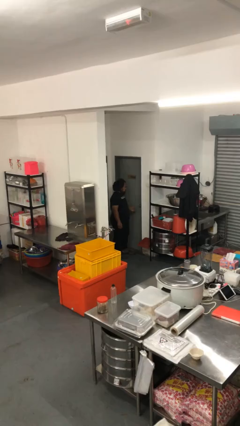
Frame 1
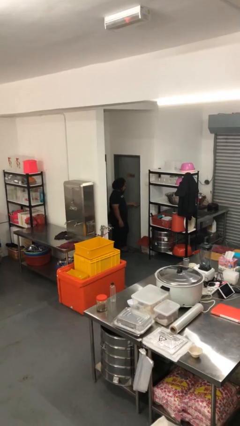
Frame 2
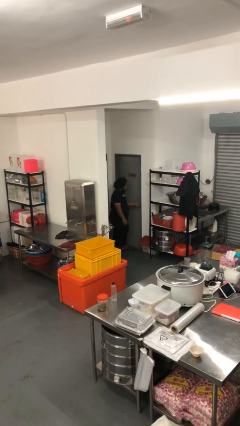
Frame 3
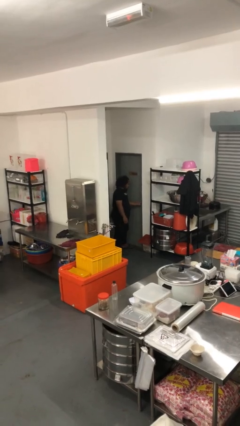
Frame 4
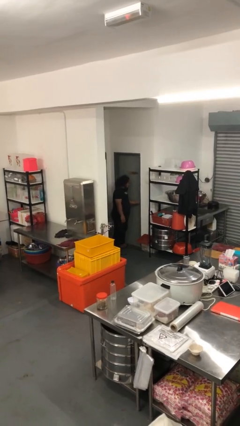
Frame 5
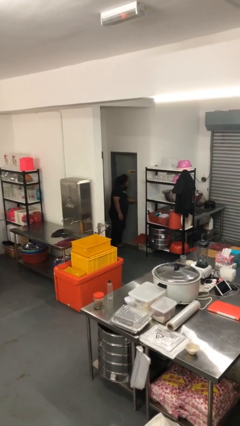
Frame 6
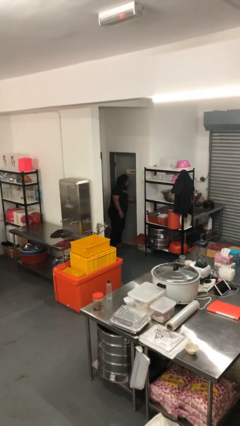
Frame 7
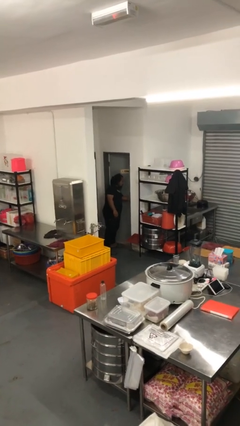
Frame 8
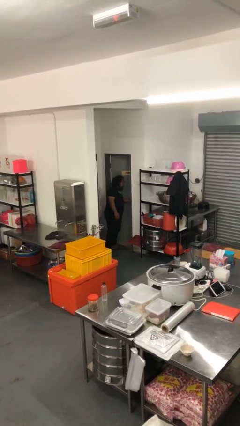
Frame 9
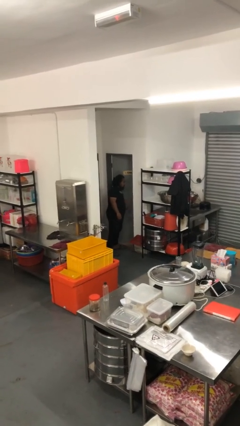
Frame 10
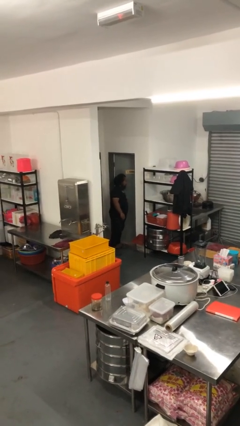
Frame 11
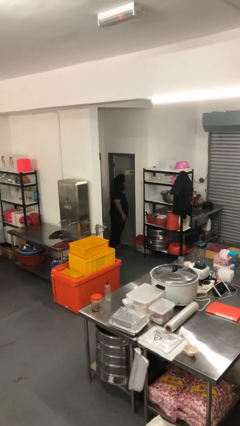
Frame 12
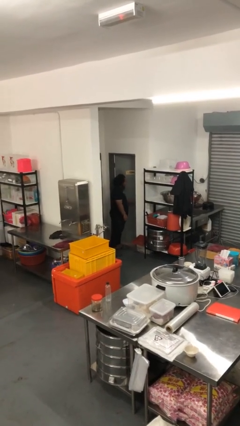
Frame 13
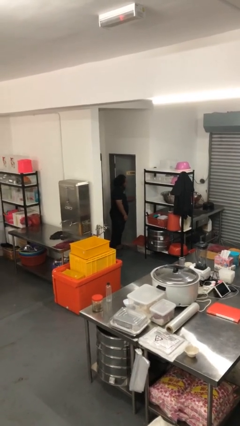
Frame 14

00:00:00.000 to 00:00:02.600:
person opens facility door

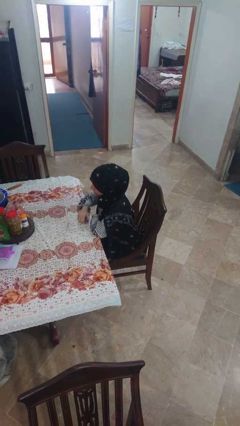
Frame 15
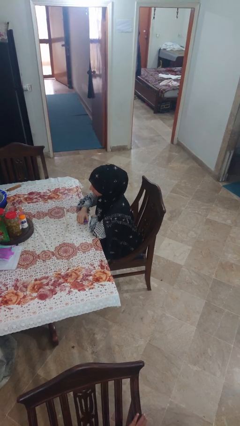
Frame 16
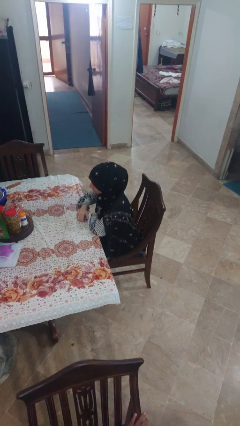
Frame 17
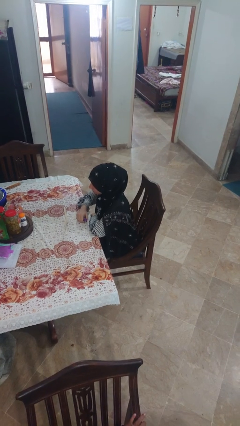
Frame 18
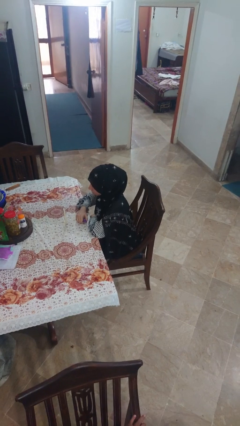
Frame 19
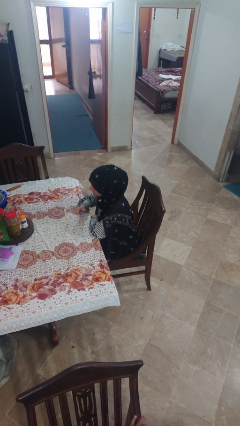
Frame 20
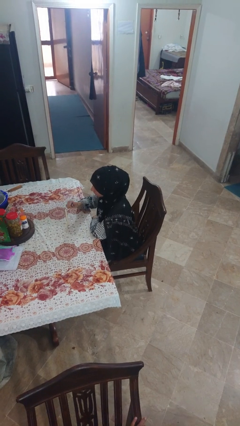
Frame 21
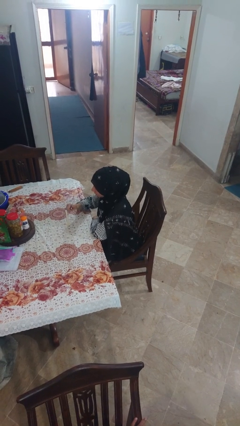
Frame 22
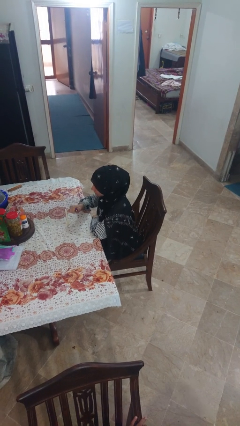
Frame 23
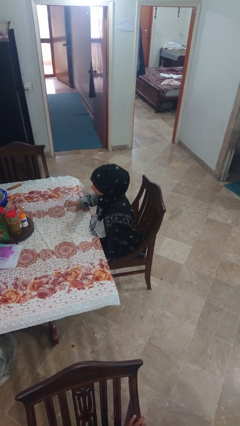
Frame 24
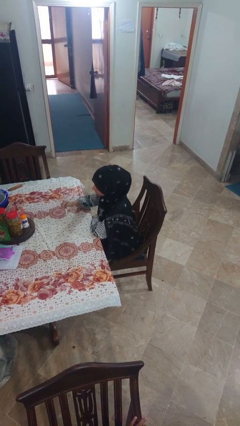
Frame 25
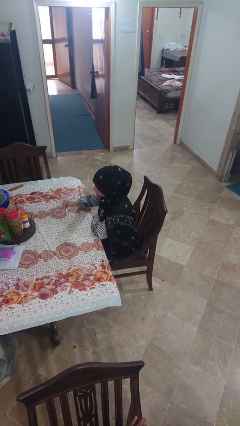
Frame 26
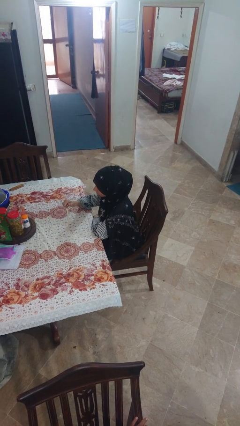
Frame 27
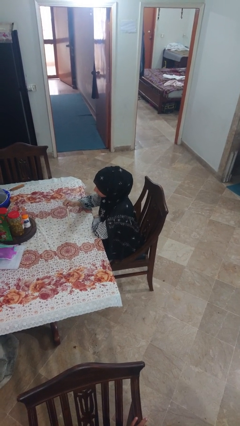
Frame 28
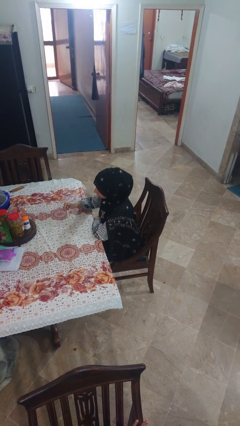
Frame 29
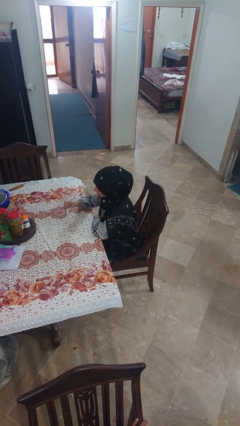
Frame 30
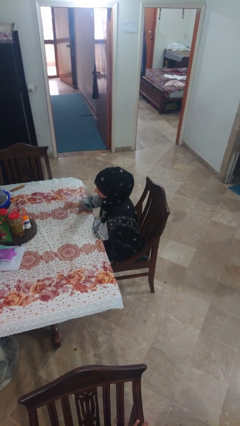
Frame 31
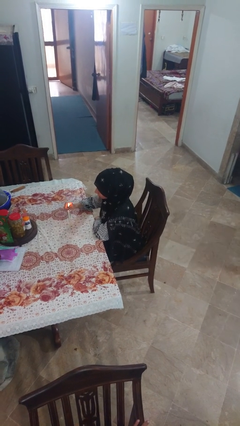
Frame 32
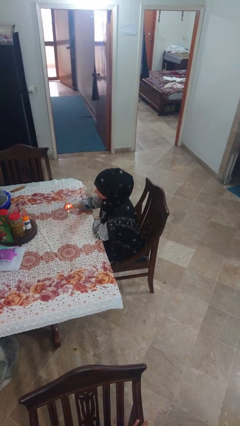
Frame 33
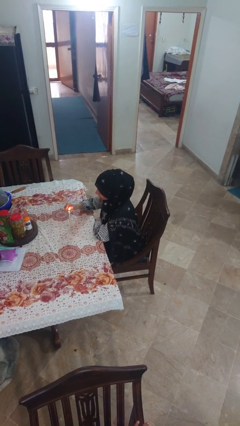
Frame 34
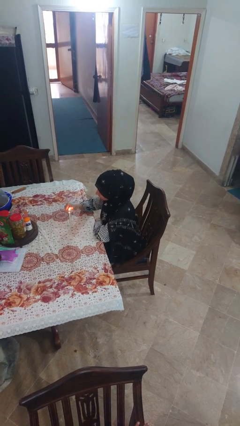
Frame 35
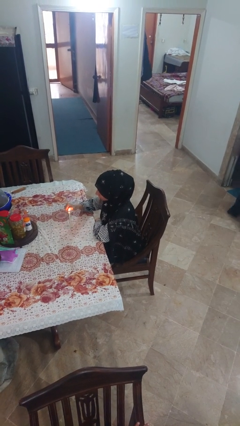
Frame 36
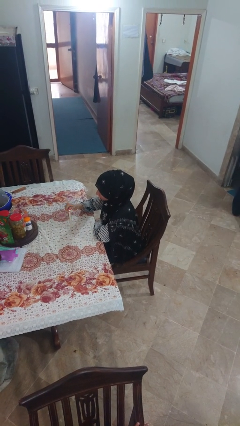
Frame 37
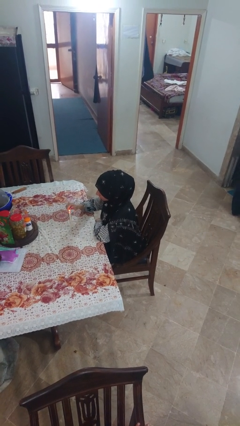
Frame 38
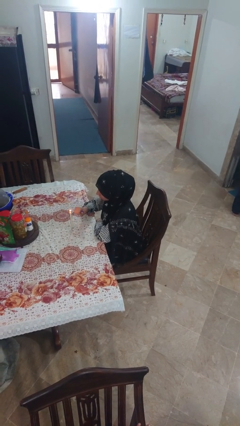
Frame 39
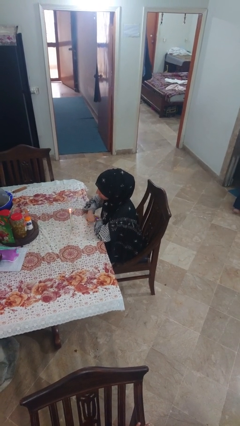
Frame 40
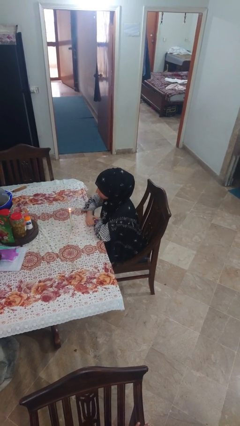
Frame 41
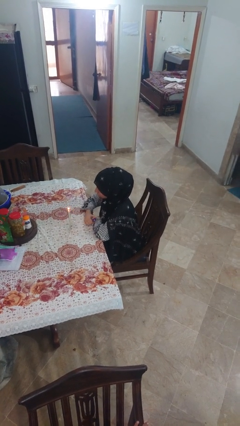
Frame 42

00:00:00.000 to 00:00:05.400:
person lights candle

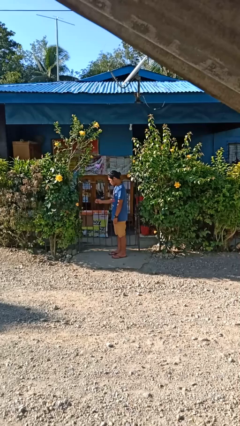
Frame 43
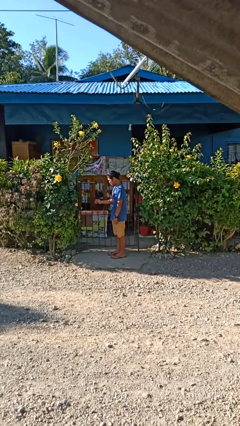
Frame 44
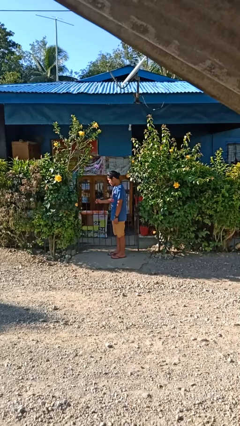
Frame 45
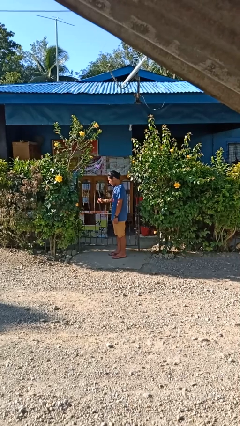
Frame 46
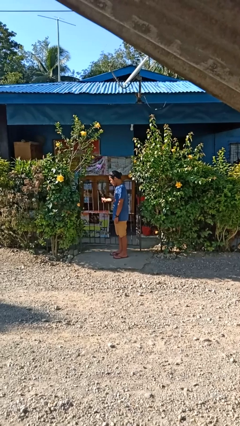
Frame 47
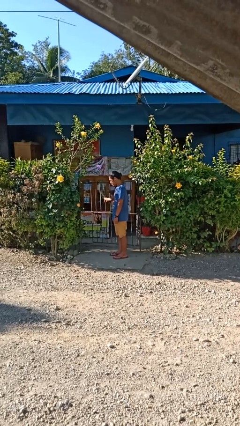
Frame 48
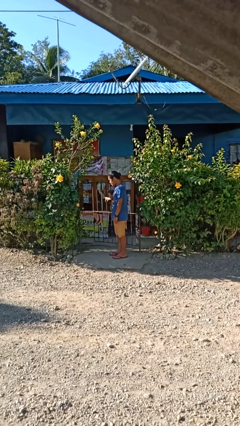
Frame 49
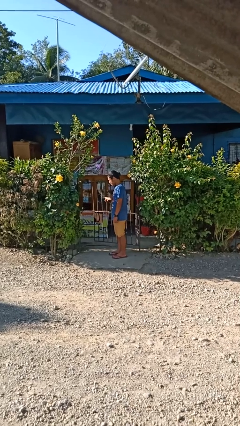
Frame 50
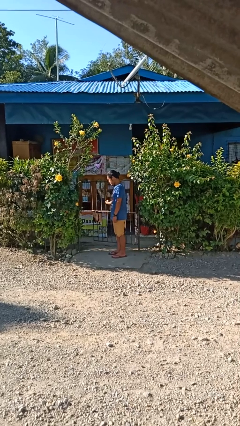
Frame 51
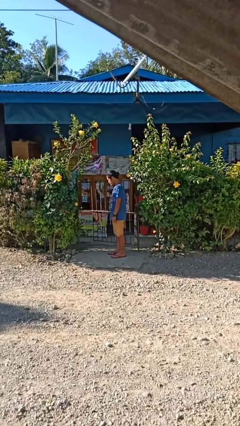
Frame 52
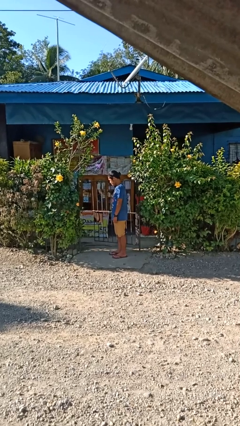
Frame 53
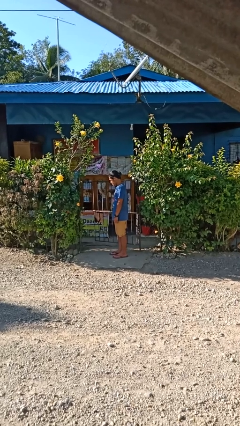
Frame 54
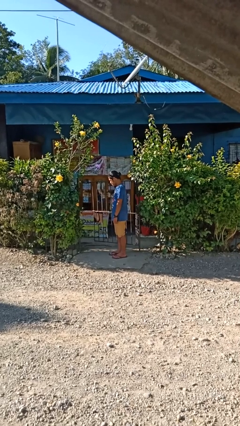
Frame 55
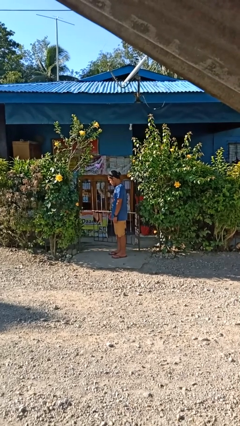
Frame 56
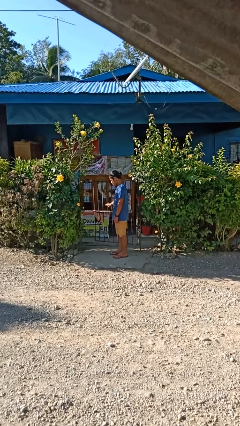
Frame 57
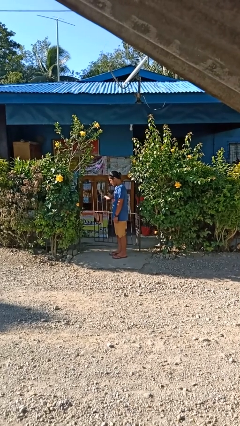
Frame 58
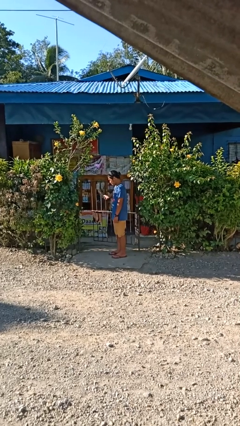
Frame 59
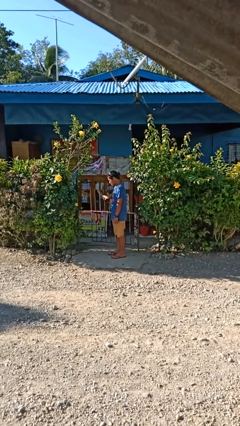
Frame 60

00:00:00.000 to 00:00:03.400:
person opens gate

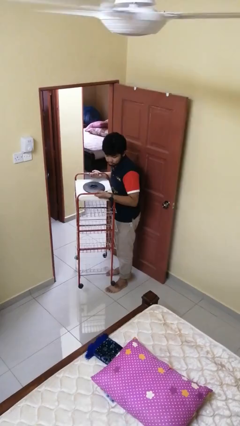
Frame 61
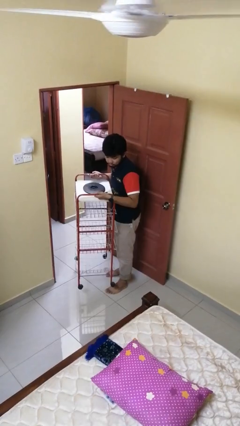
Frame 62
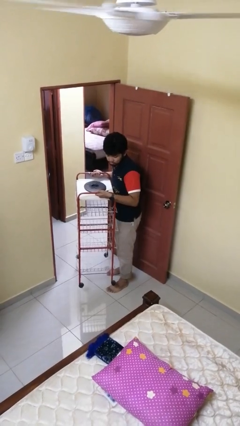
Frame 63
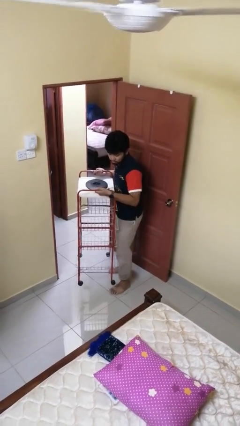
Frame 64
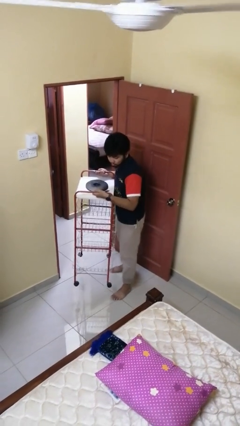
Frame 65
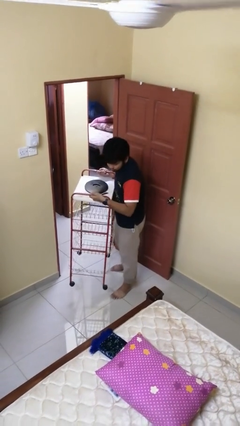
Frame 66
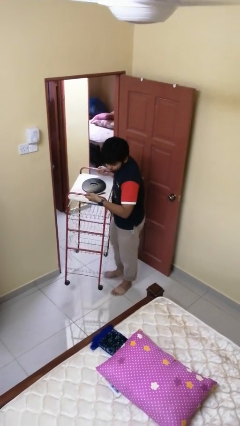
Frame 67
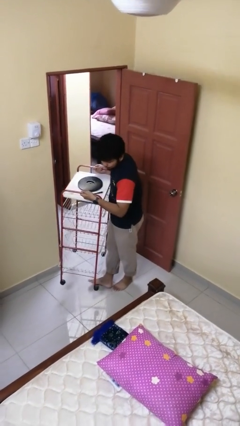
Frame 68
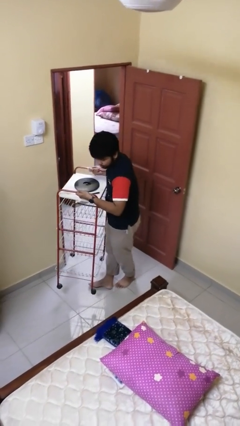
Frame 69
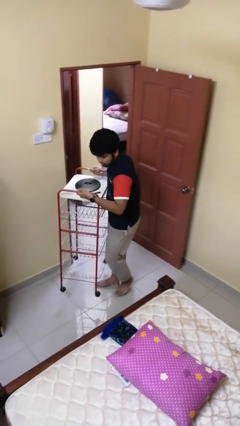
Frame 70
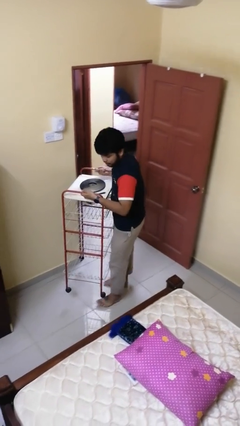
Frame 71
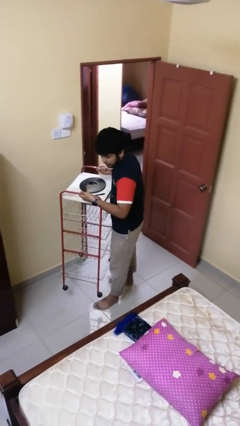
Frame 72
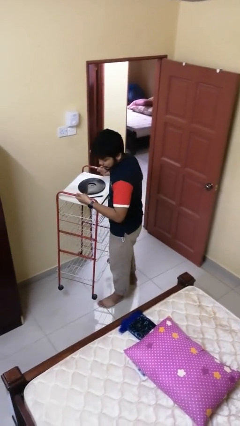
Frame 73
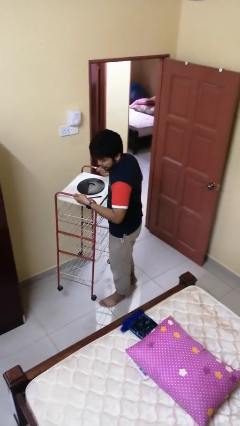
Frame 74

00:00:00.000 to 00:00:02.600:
person carries furniture

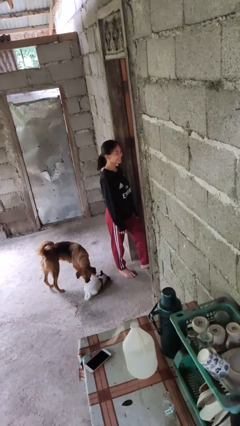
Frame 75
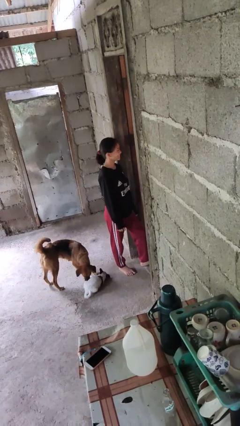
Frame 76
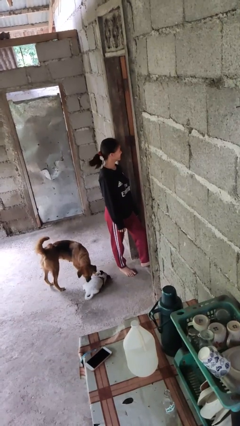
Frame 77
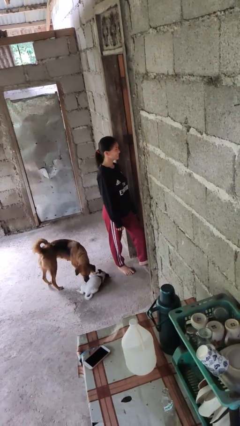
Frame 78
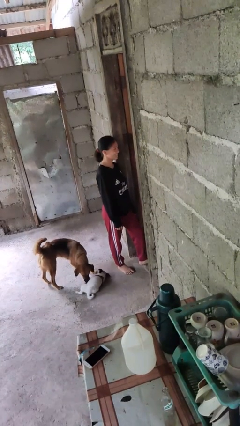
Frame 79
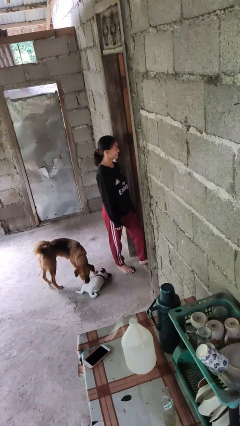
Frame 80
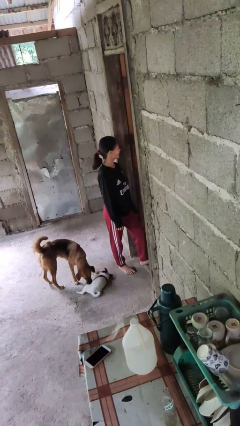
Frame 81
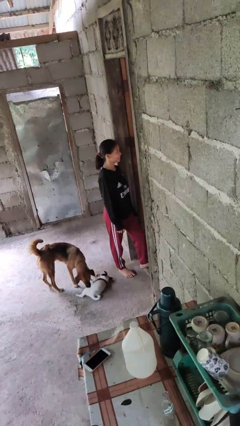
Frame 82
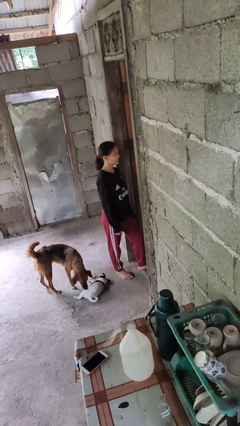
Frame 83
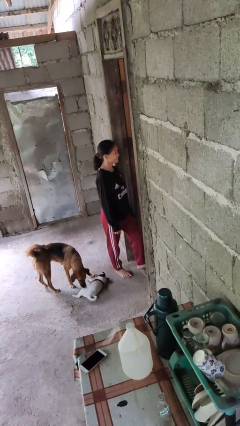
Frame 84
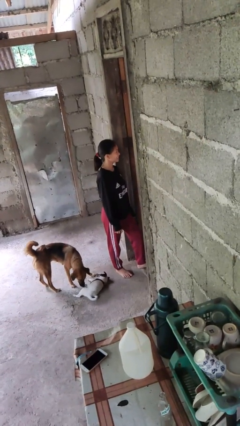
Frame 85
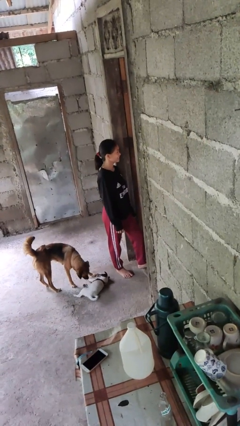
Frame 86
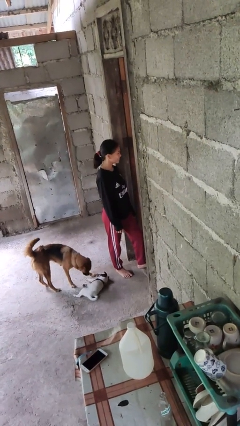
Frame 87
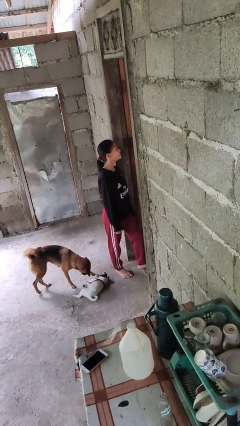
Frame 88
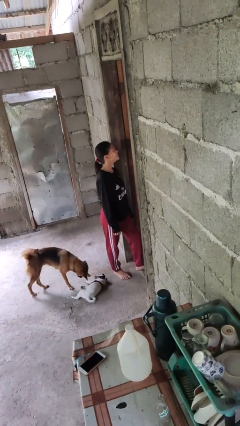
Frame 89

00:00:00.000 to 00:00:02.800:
person shakes head

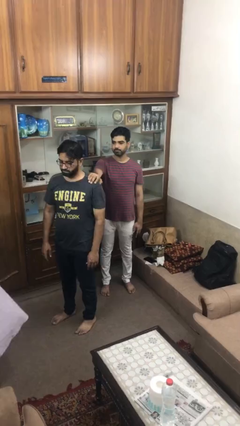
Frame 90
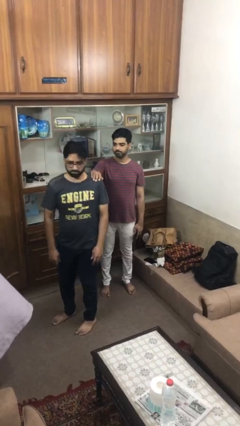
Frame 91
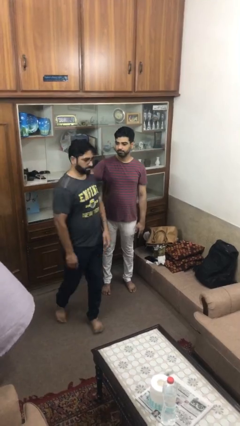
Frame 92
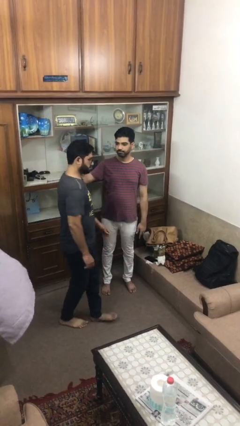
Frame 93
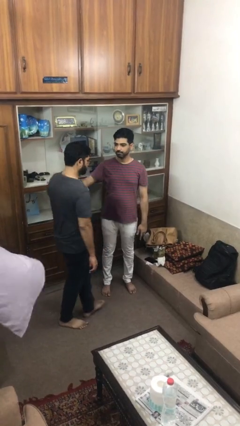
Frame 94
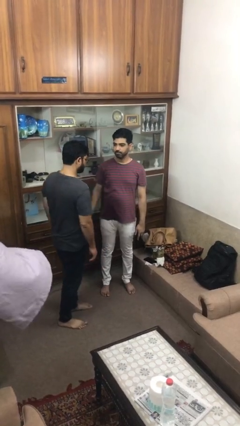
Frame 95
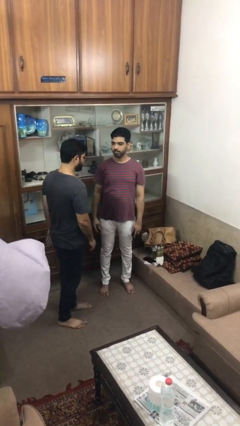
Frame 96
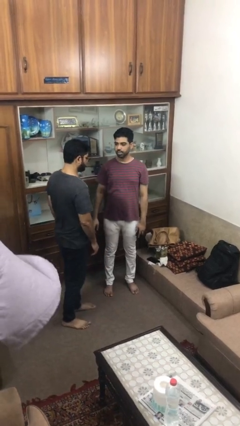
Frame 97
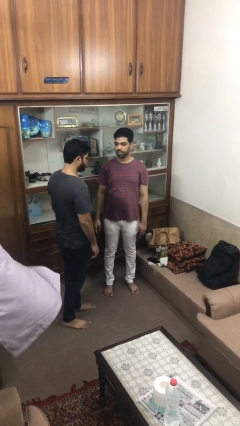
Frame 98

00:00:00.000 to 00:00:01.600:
person spins person around
